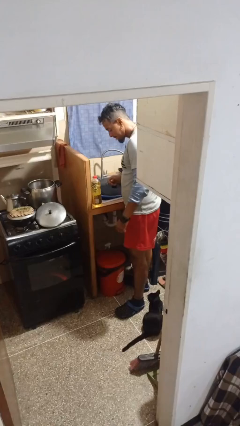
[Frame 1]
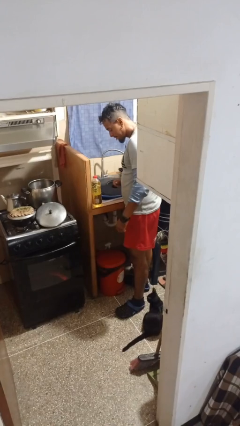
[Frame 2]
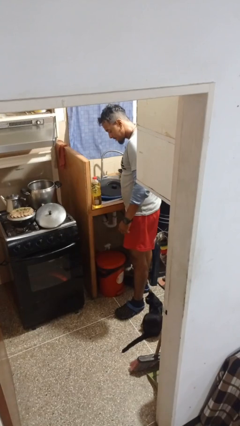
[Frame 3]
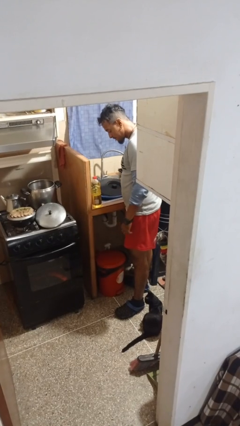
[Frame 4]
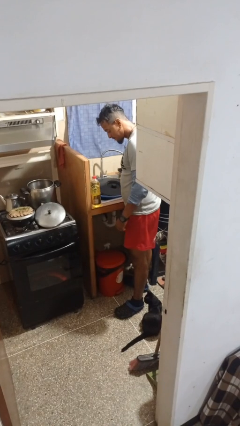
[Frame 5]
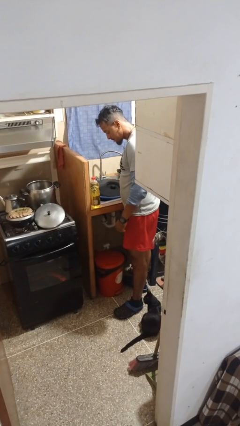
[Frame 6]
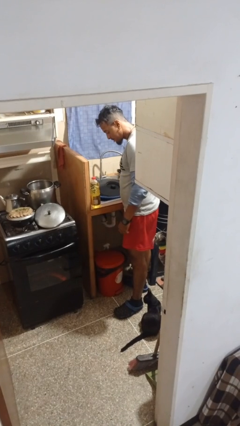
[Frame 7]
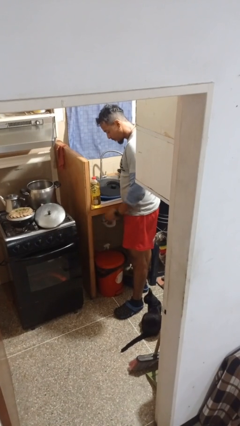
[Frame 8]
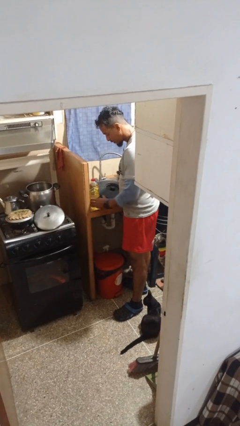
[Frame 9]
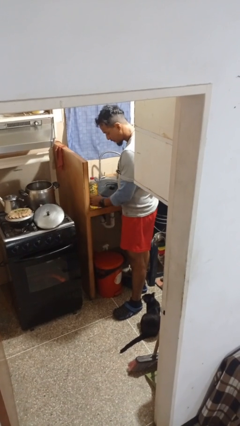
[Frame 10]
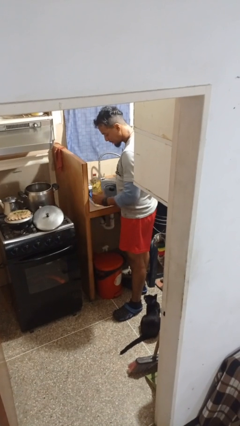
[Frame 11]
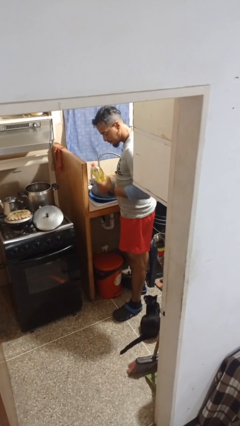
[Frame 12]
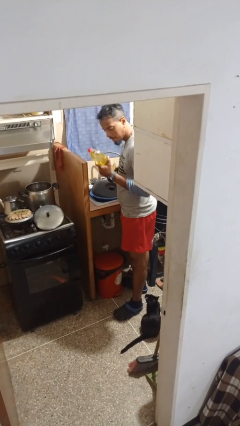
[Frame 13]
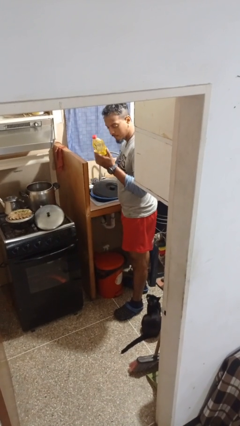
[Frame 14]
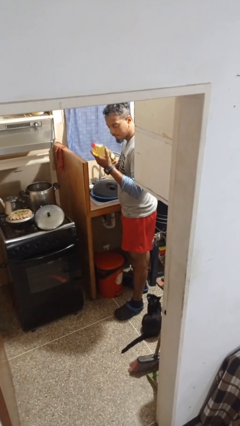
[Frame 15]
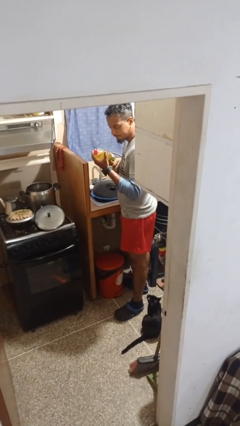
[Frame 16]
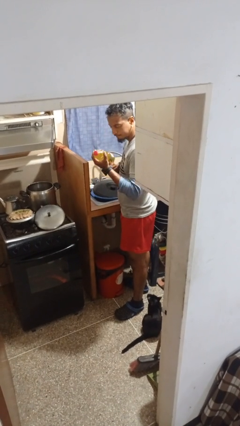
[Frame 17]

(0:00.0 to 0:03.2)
person picks up object from countertop

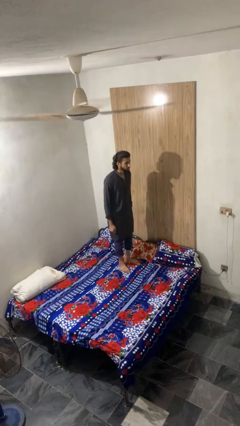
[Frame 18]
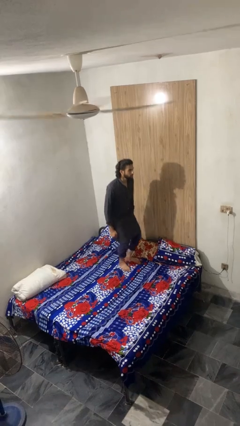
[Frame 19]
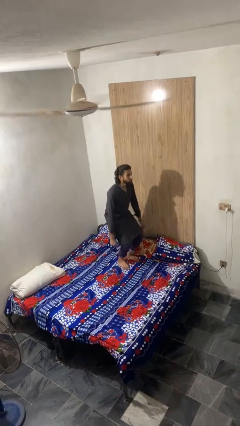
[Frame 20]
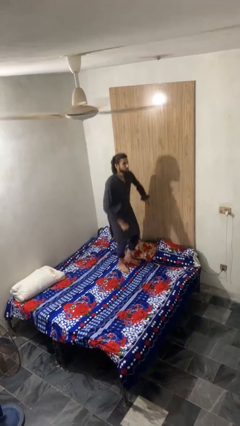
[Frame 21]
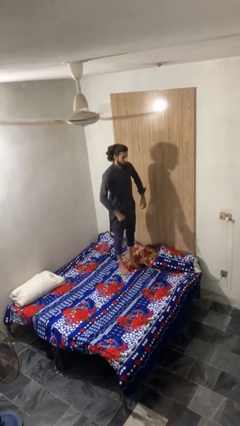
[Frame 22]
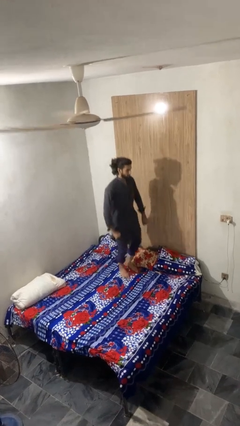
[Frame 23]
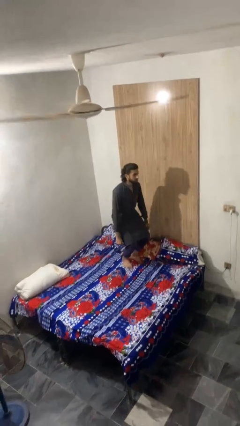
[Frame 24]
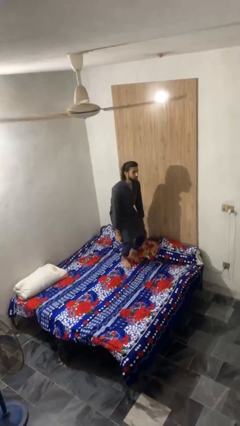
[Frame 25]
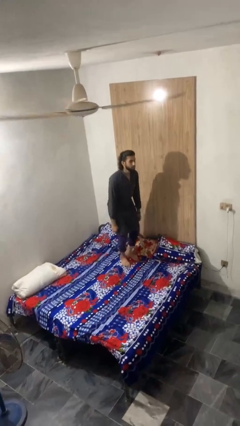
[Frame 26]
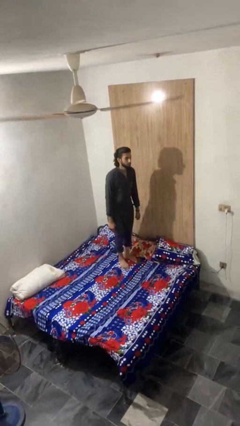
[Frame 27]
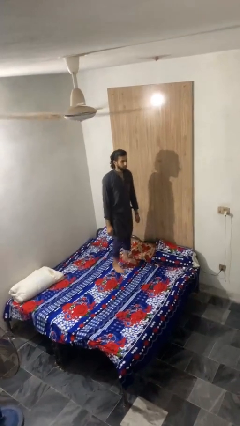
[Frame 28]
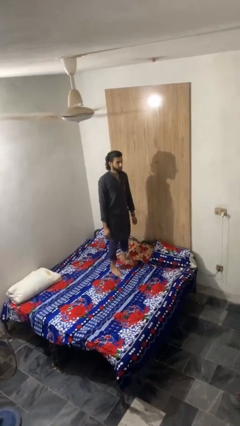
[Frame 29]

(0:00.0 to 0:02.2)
person jumps on bed

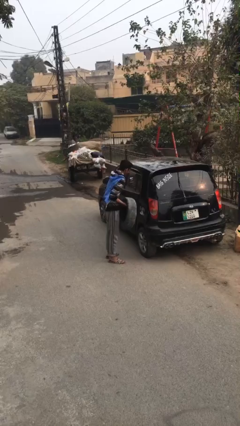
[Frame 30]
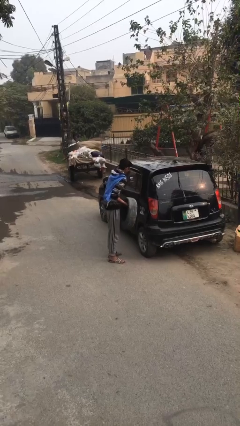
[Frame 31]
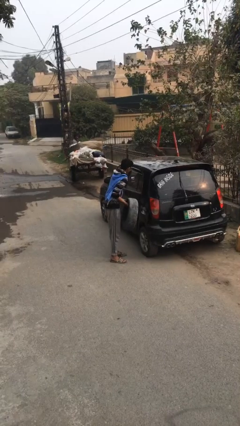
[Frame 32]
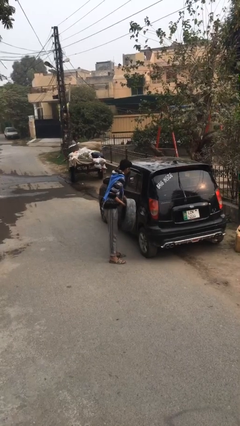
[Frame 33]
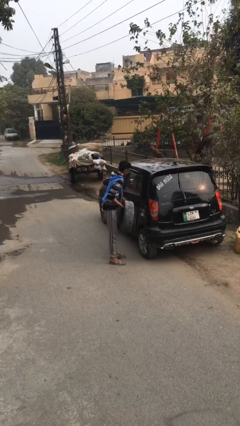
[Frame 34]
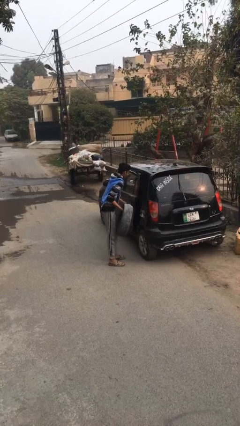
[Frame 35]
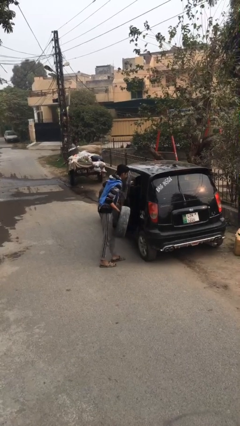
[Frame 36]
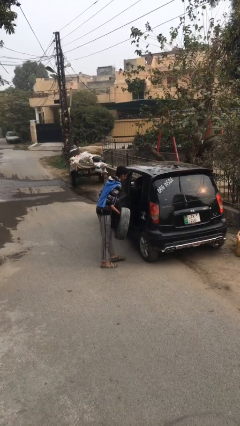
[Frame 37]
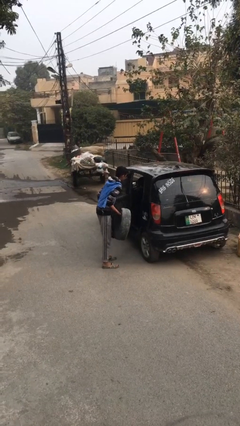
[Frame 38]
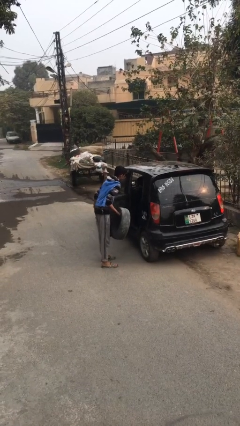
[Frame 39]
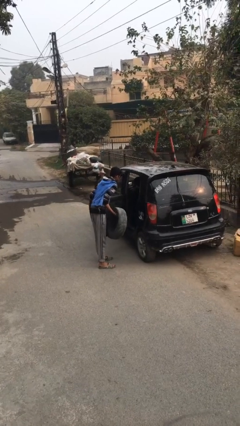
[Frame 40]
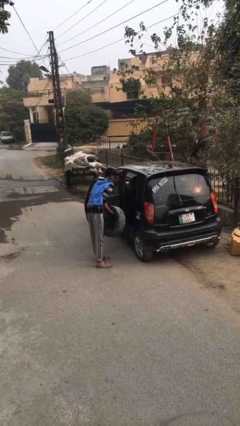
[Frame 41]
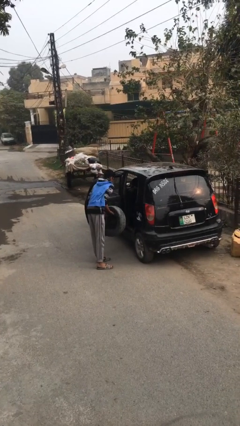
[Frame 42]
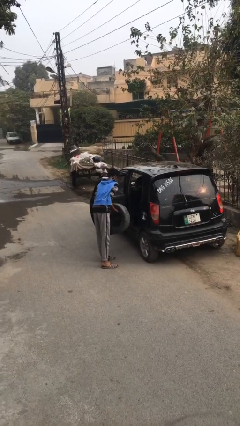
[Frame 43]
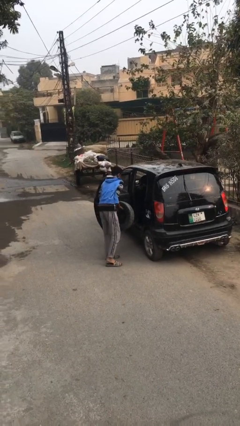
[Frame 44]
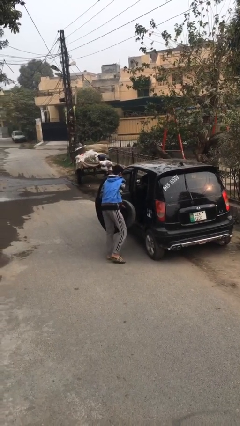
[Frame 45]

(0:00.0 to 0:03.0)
person opens car door

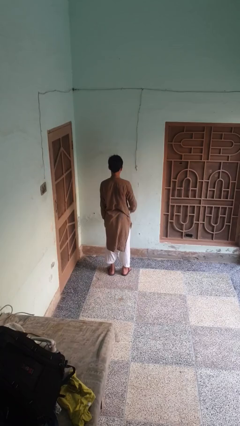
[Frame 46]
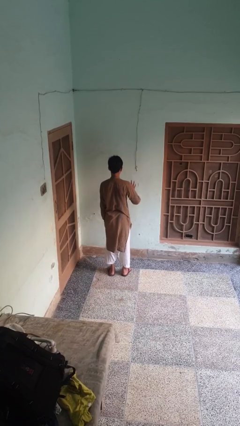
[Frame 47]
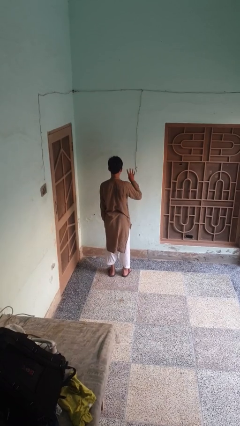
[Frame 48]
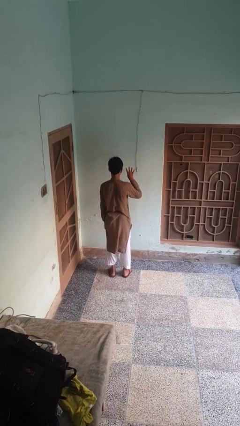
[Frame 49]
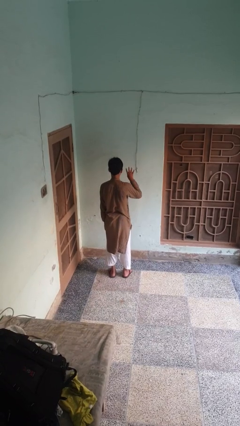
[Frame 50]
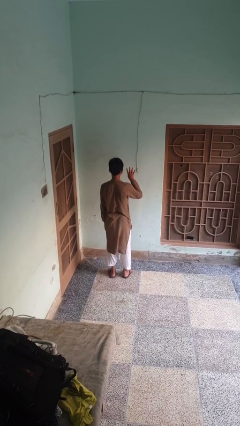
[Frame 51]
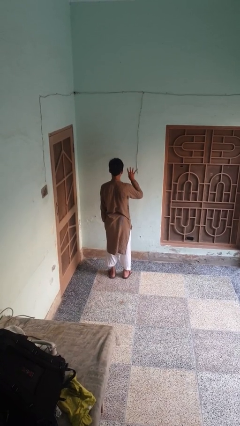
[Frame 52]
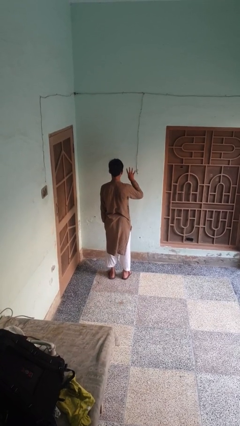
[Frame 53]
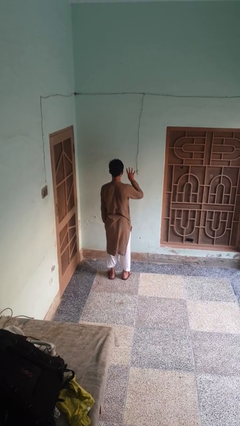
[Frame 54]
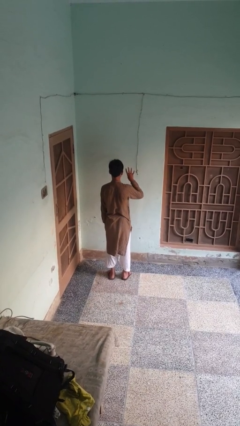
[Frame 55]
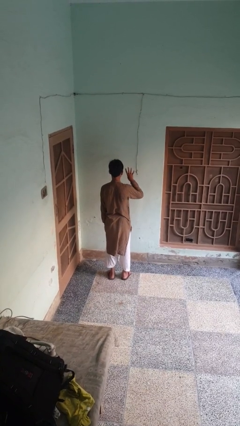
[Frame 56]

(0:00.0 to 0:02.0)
person gestures number four

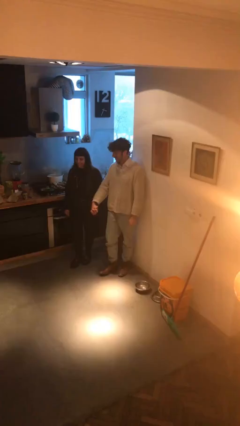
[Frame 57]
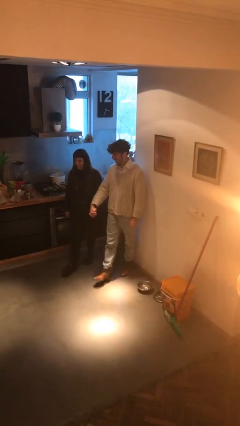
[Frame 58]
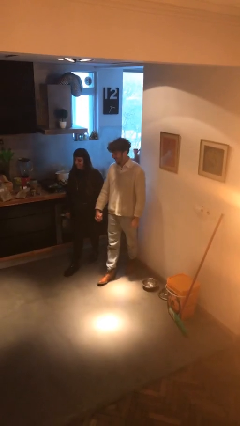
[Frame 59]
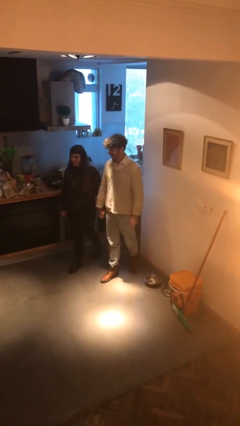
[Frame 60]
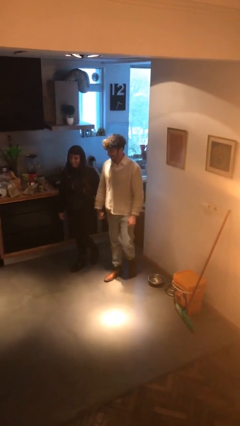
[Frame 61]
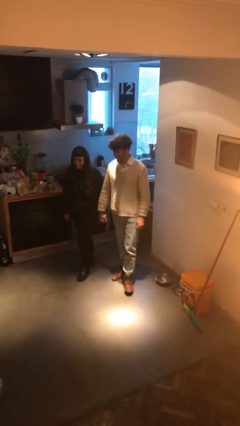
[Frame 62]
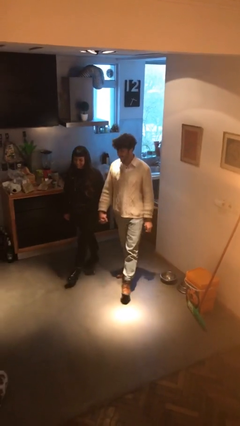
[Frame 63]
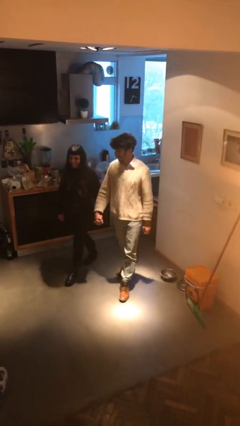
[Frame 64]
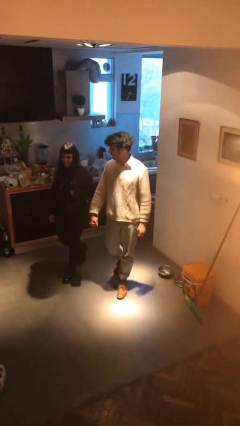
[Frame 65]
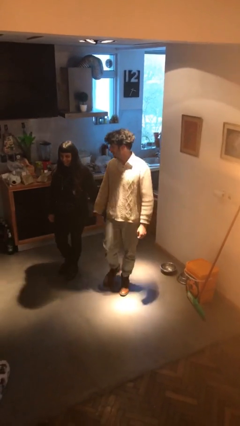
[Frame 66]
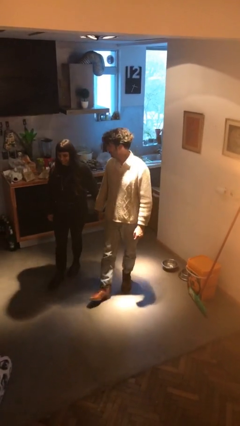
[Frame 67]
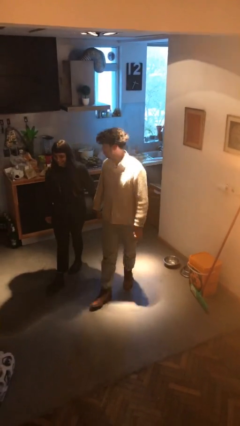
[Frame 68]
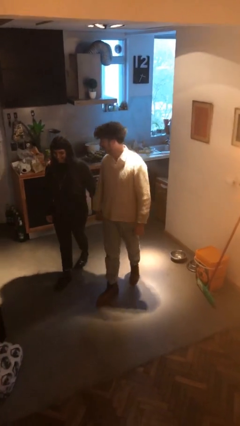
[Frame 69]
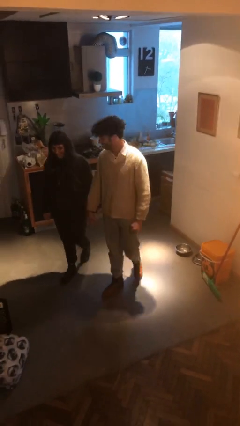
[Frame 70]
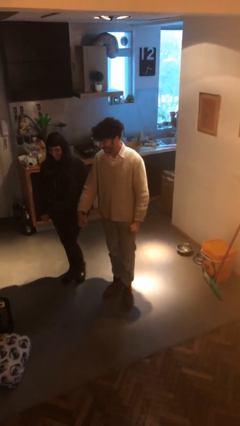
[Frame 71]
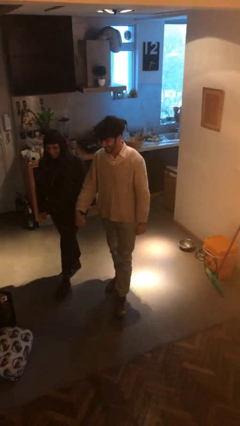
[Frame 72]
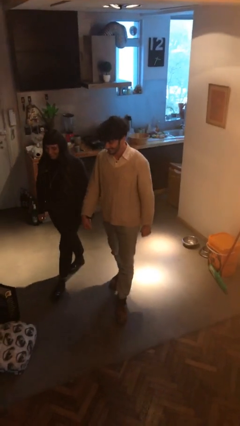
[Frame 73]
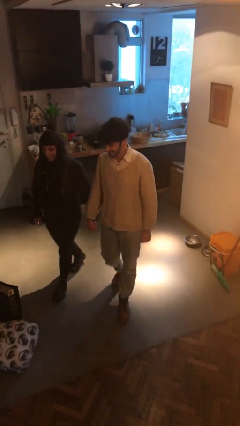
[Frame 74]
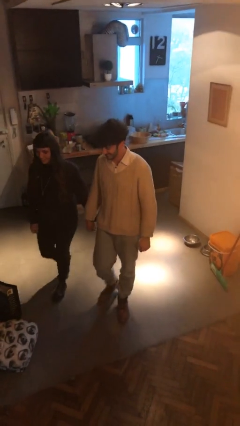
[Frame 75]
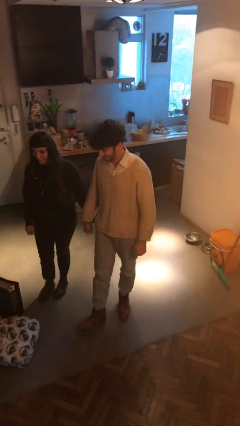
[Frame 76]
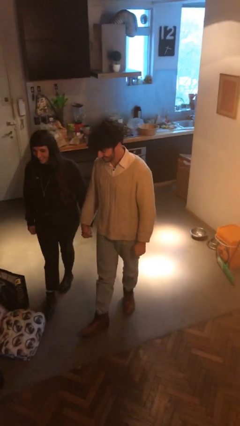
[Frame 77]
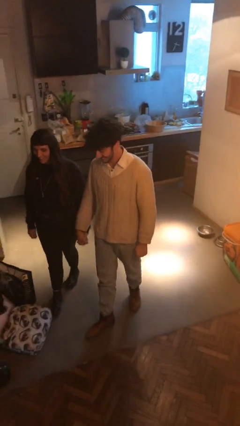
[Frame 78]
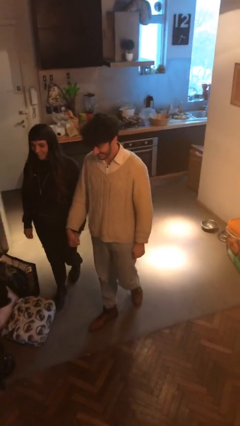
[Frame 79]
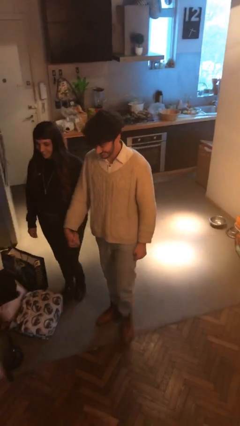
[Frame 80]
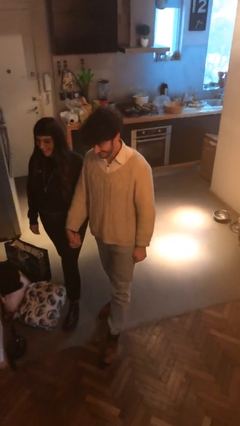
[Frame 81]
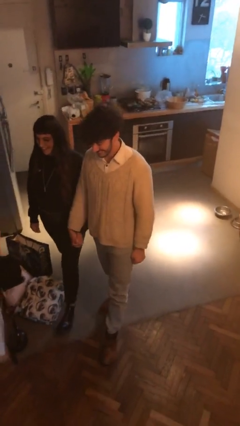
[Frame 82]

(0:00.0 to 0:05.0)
person holds hand

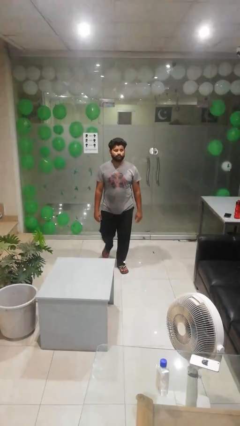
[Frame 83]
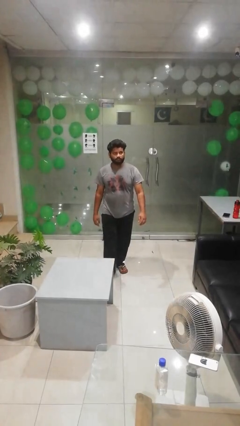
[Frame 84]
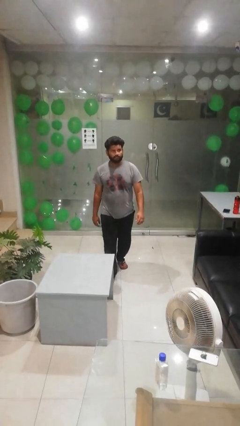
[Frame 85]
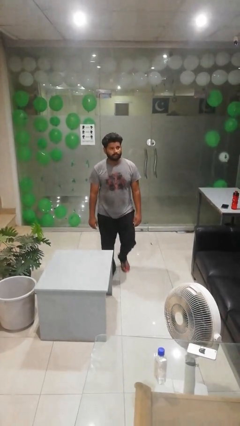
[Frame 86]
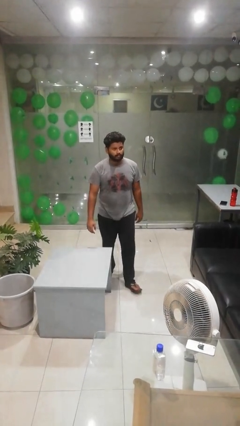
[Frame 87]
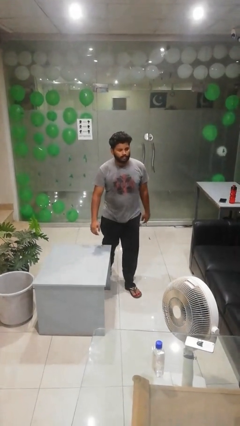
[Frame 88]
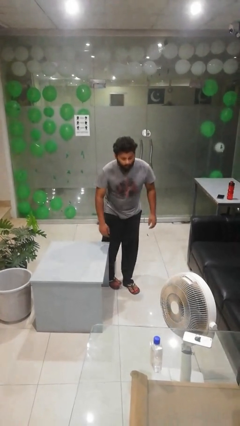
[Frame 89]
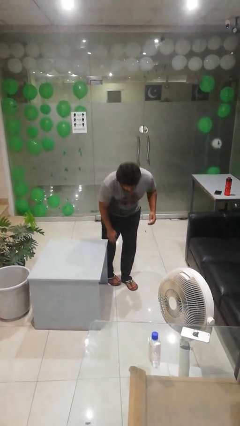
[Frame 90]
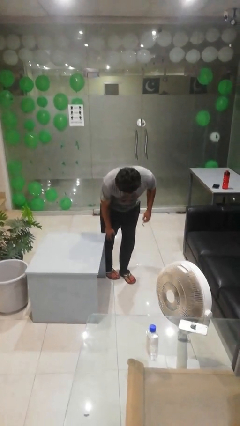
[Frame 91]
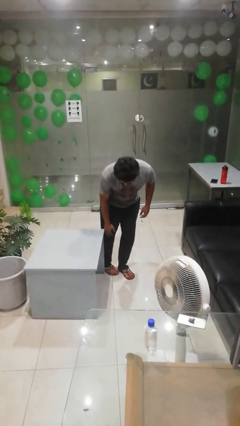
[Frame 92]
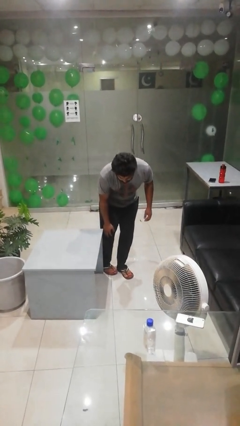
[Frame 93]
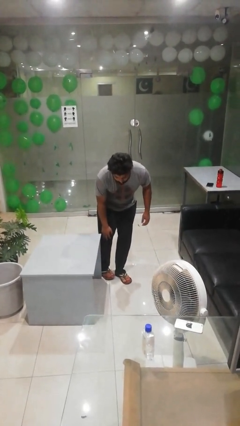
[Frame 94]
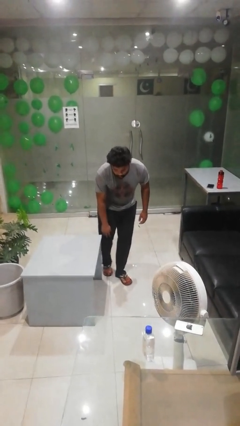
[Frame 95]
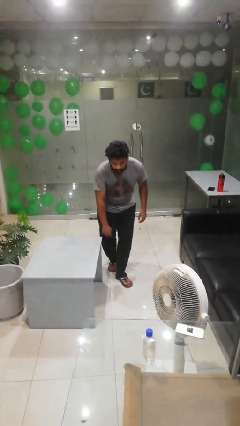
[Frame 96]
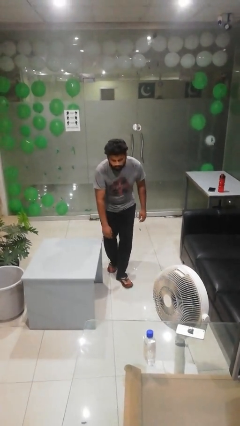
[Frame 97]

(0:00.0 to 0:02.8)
person bumps into table
